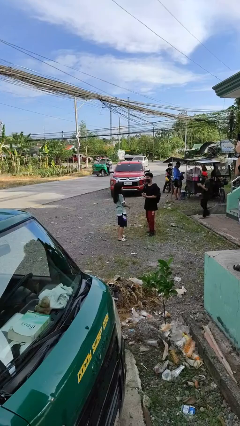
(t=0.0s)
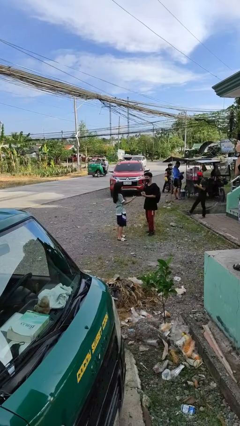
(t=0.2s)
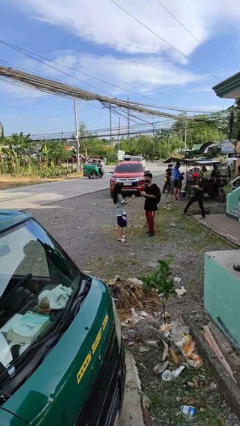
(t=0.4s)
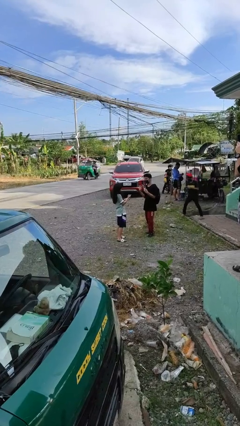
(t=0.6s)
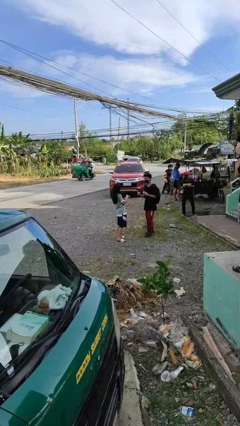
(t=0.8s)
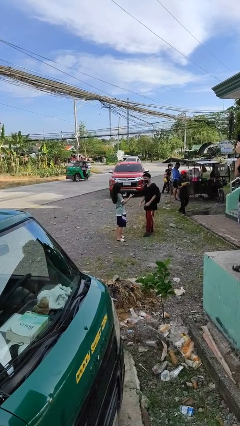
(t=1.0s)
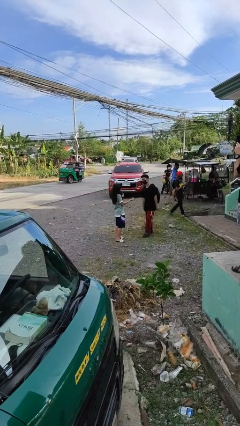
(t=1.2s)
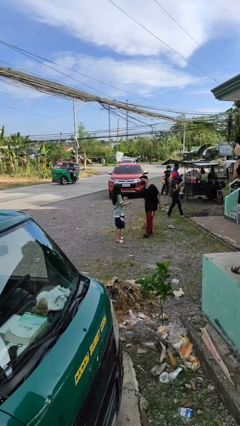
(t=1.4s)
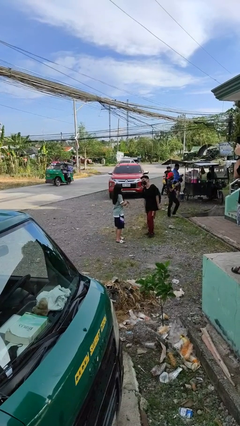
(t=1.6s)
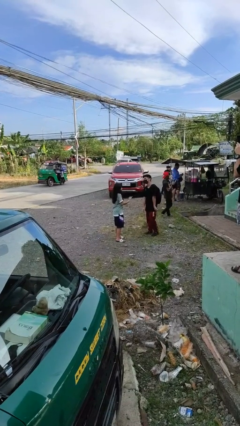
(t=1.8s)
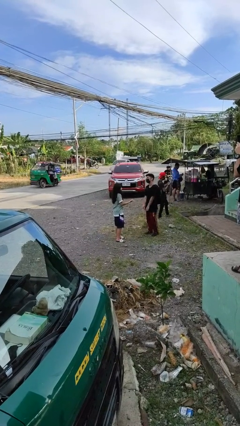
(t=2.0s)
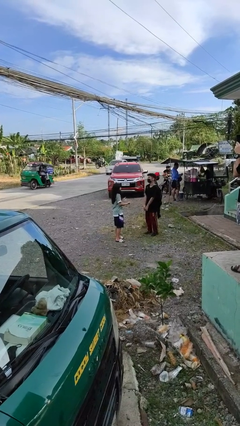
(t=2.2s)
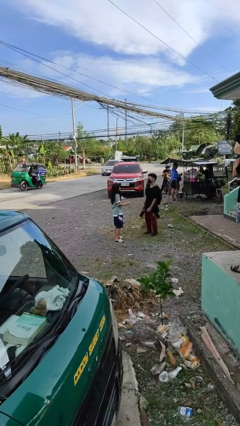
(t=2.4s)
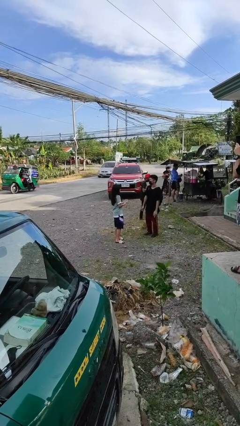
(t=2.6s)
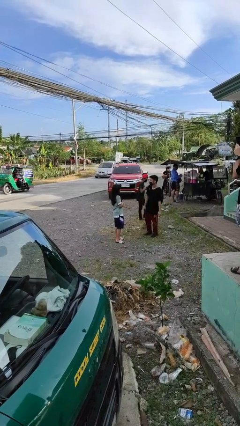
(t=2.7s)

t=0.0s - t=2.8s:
person talks to person

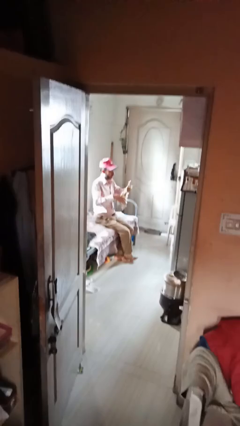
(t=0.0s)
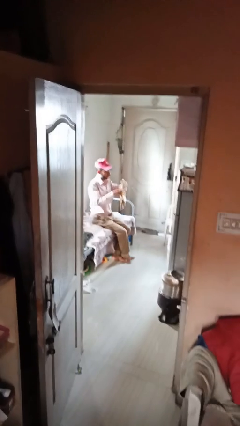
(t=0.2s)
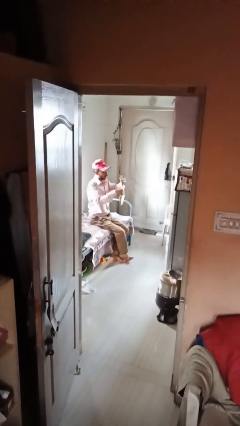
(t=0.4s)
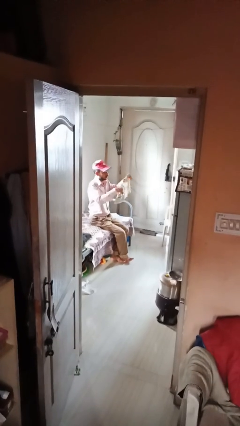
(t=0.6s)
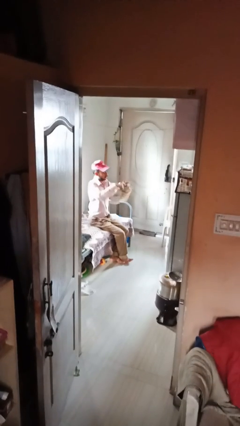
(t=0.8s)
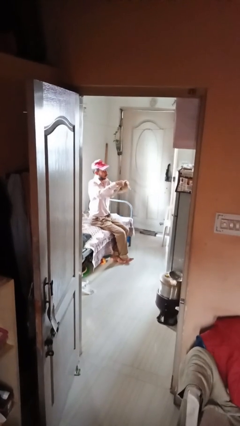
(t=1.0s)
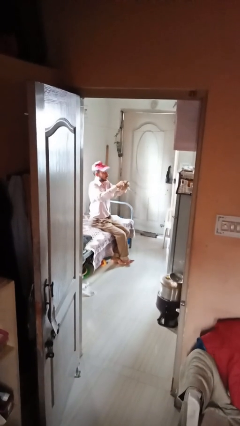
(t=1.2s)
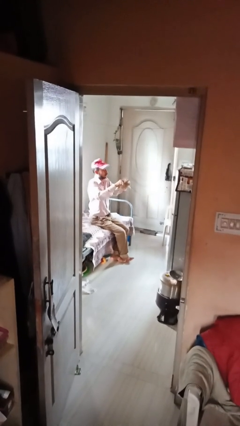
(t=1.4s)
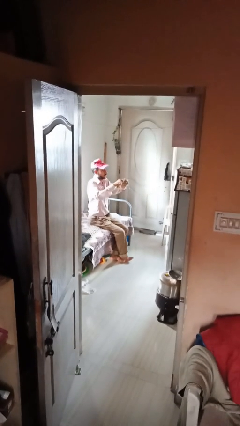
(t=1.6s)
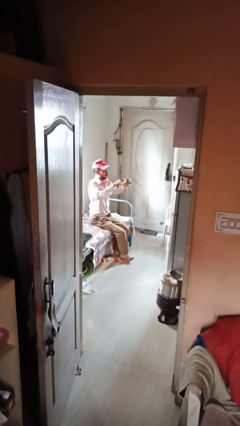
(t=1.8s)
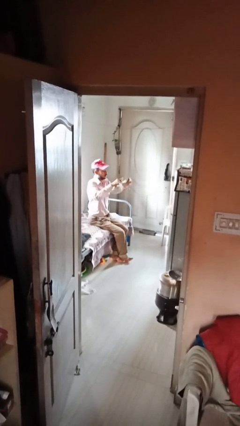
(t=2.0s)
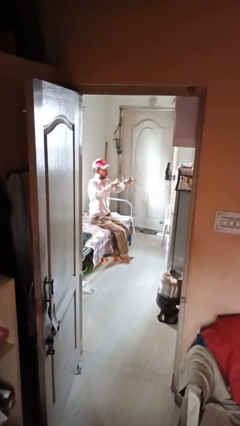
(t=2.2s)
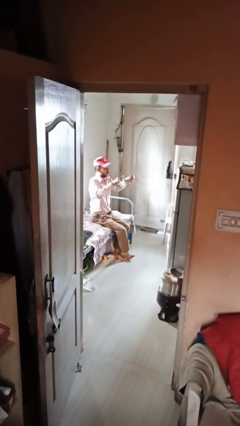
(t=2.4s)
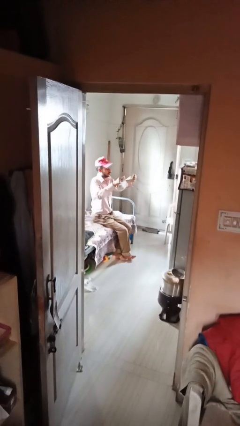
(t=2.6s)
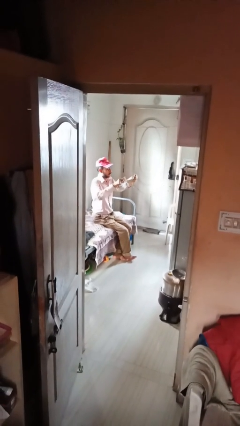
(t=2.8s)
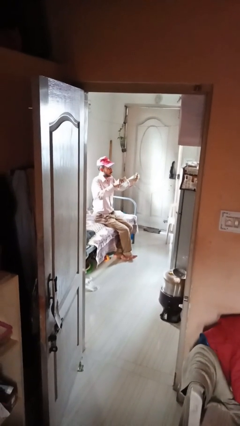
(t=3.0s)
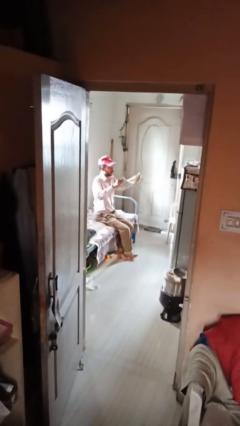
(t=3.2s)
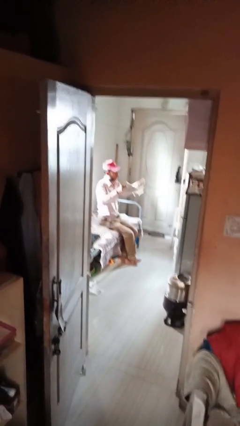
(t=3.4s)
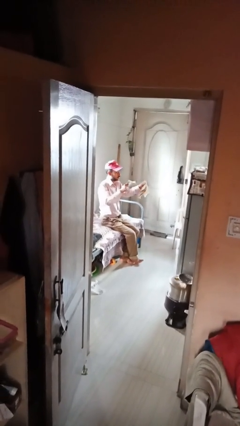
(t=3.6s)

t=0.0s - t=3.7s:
person tears paper

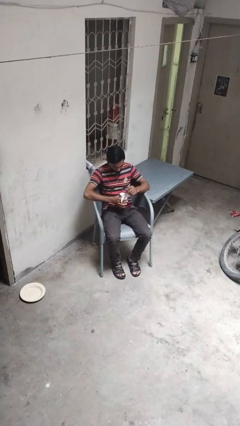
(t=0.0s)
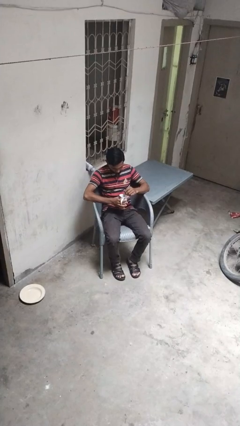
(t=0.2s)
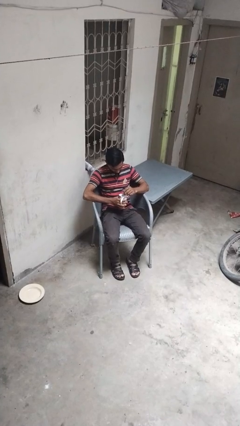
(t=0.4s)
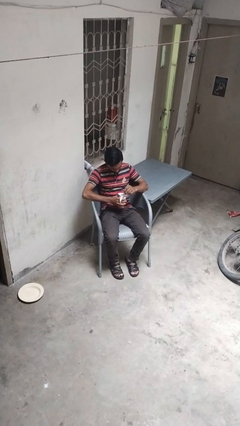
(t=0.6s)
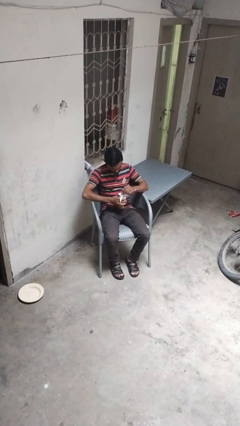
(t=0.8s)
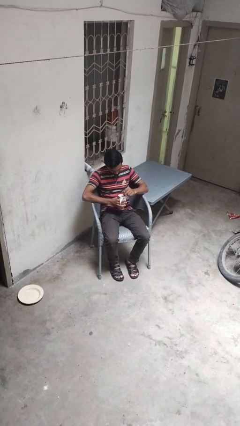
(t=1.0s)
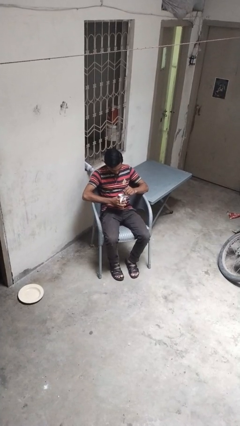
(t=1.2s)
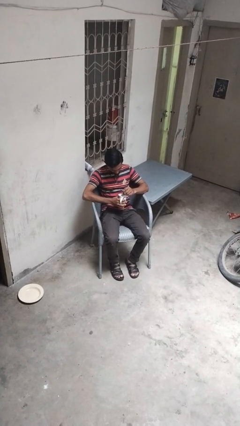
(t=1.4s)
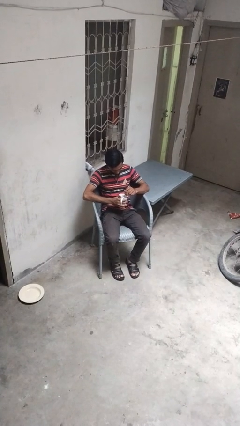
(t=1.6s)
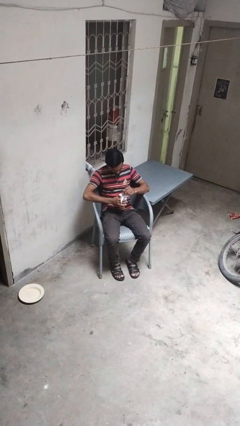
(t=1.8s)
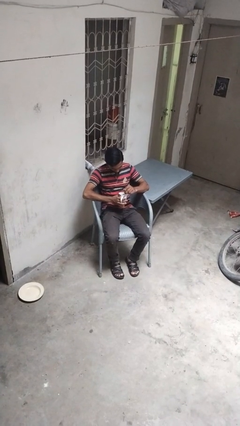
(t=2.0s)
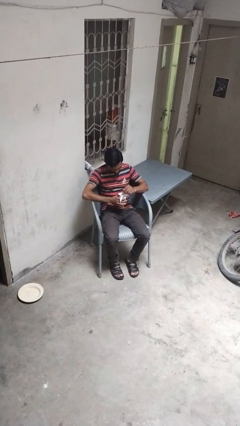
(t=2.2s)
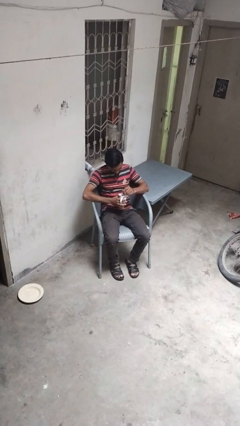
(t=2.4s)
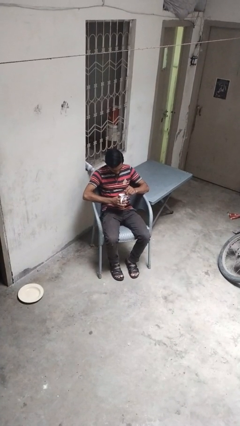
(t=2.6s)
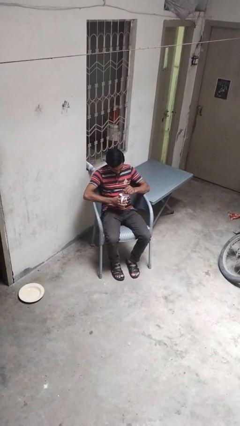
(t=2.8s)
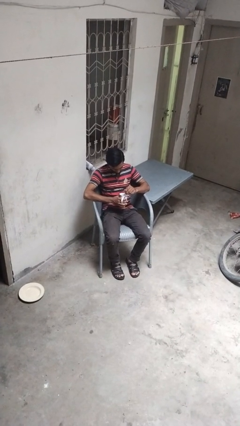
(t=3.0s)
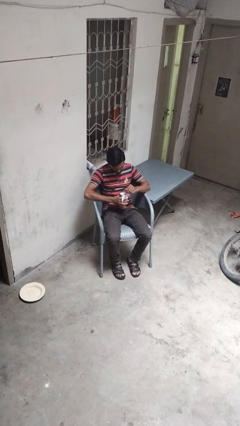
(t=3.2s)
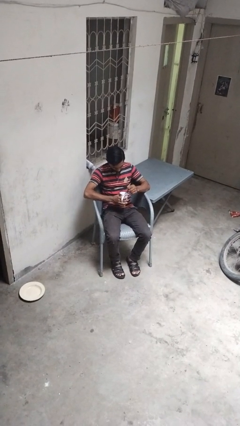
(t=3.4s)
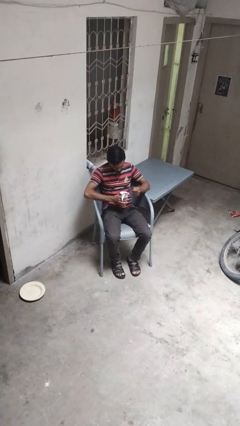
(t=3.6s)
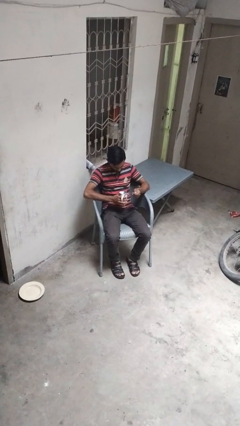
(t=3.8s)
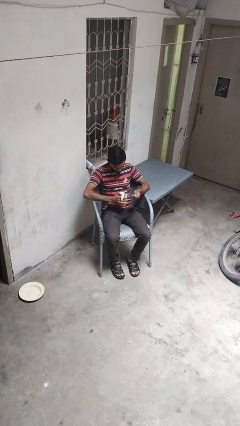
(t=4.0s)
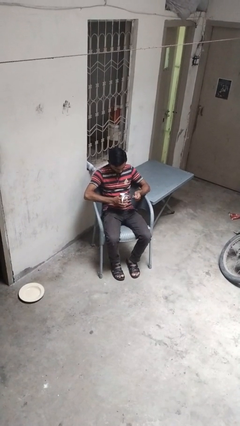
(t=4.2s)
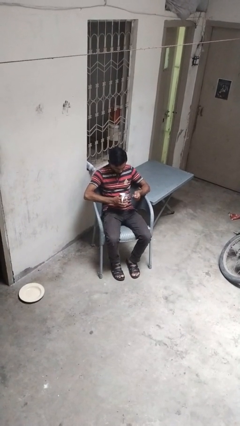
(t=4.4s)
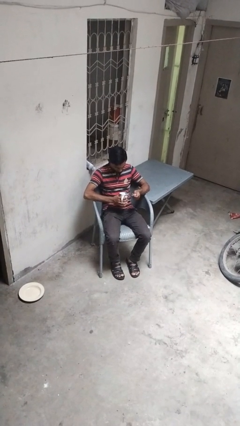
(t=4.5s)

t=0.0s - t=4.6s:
person stirs mug

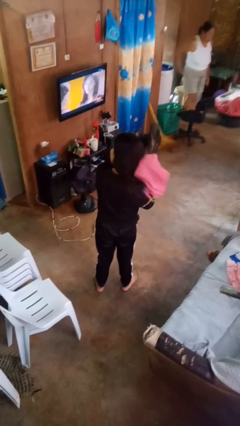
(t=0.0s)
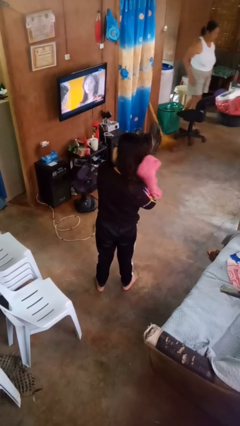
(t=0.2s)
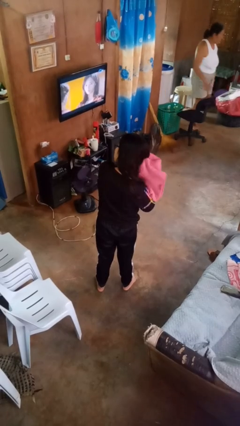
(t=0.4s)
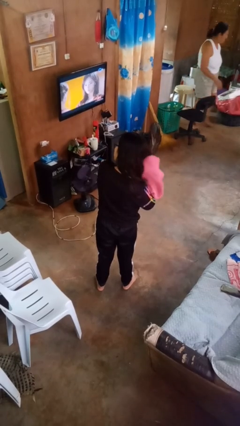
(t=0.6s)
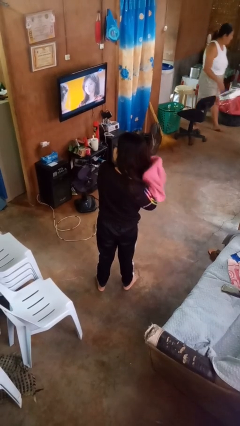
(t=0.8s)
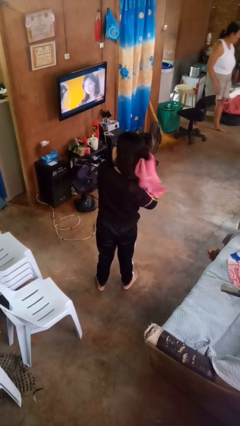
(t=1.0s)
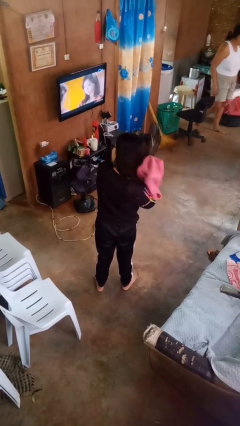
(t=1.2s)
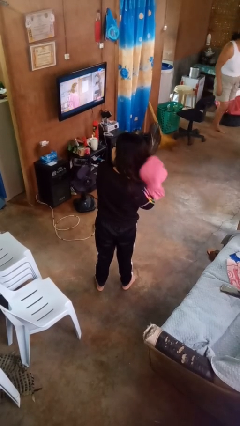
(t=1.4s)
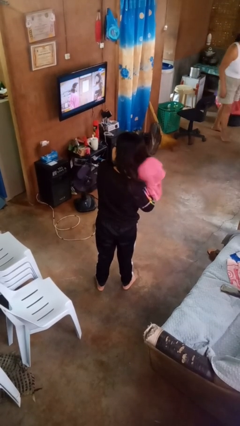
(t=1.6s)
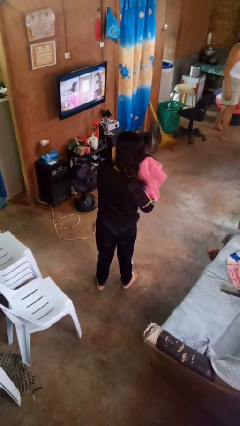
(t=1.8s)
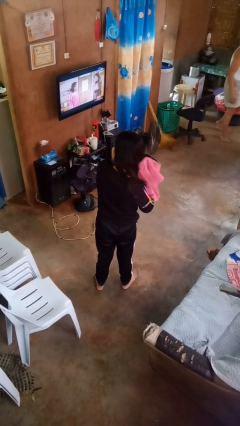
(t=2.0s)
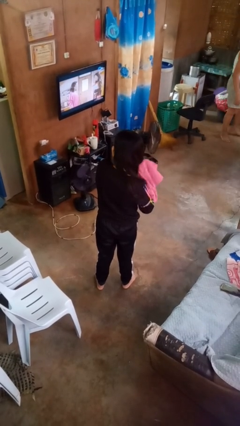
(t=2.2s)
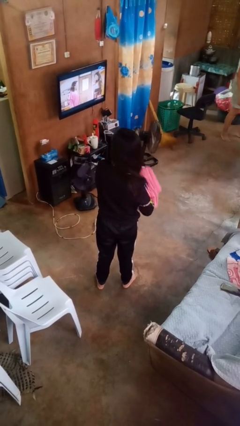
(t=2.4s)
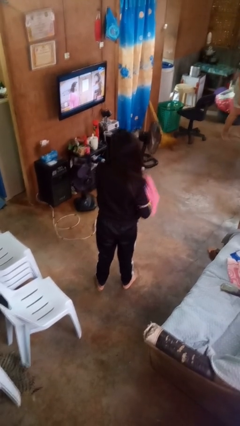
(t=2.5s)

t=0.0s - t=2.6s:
person dries hair with towel

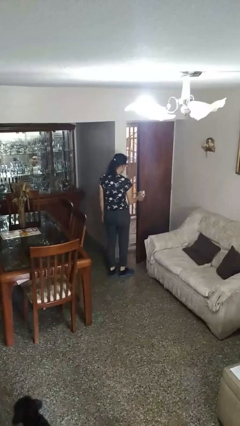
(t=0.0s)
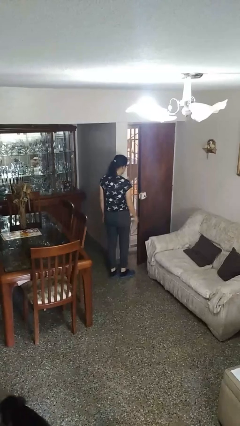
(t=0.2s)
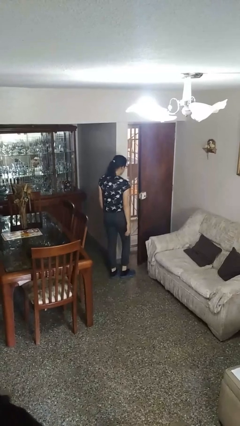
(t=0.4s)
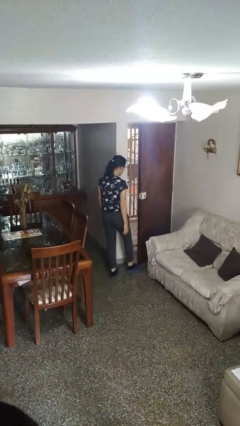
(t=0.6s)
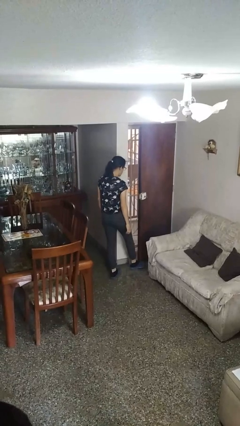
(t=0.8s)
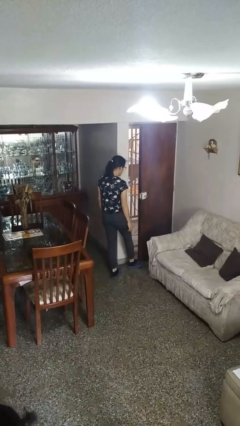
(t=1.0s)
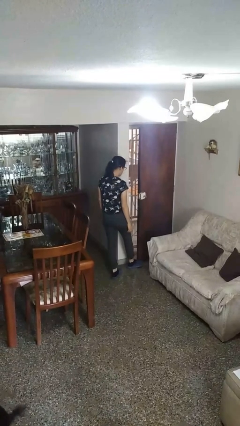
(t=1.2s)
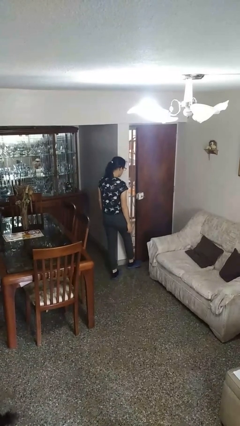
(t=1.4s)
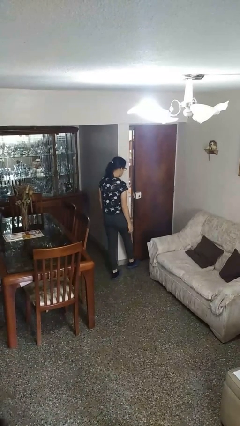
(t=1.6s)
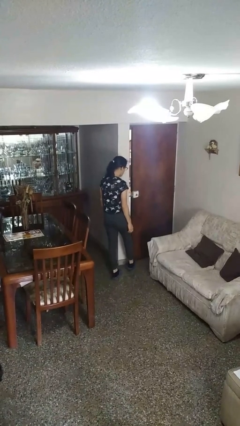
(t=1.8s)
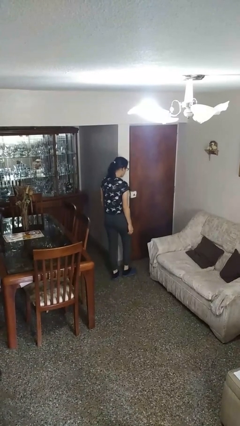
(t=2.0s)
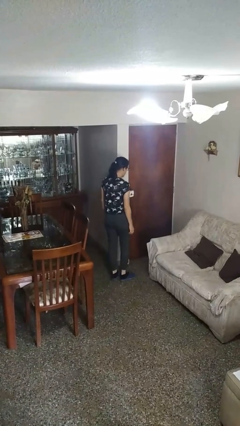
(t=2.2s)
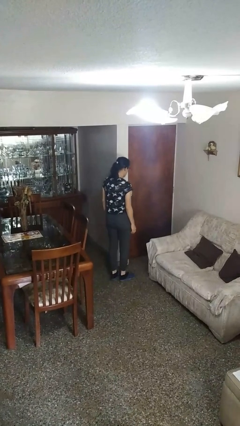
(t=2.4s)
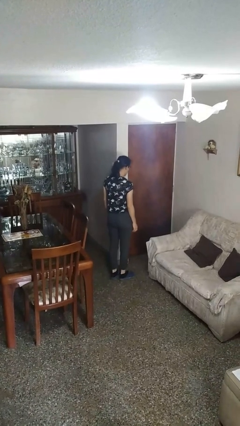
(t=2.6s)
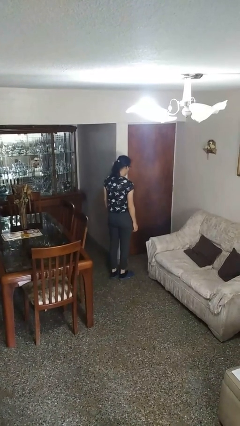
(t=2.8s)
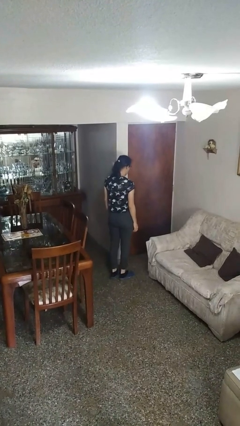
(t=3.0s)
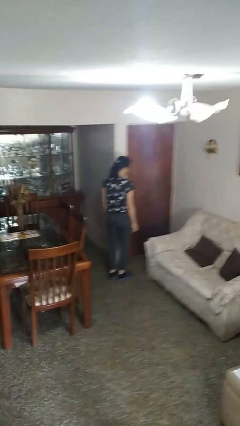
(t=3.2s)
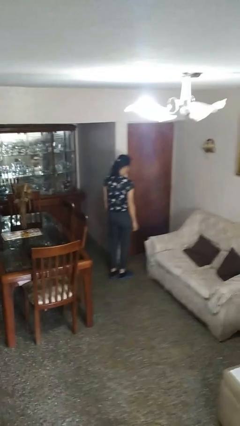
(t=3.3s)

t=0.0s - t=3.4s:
person closes door with foot

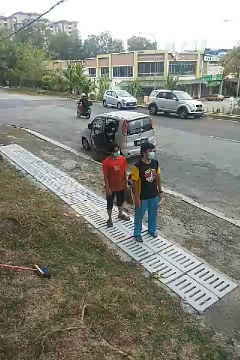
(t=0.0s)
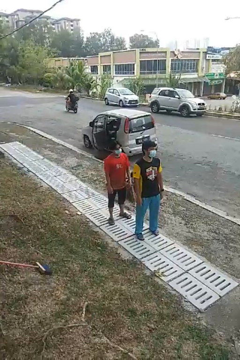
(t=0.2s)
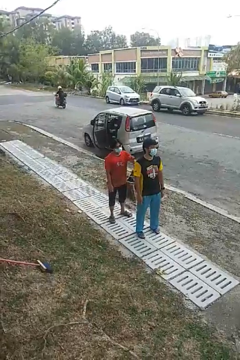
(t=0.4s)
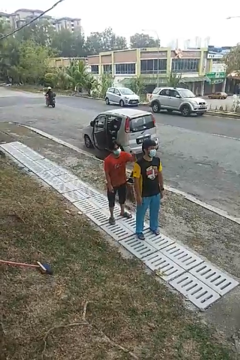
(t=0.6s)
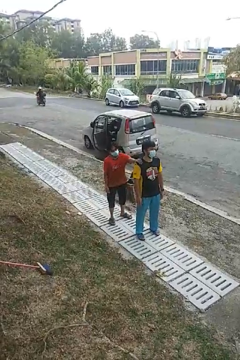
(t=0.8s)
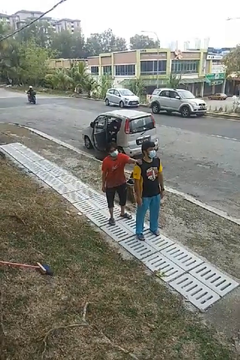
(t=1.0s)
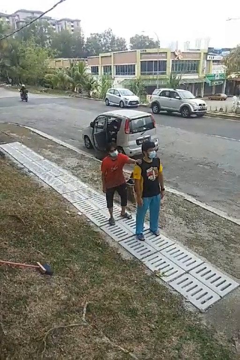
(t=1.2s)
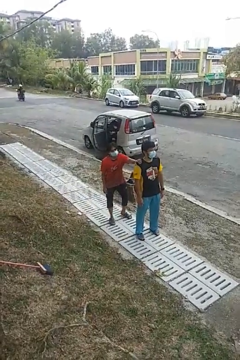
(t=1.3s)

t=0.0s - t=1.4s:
person grabs person by shoulder
